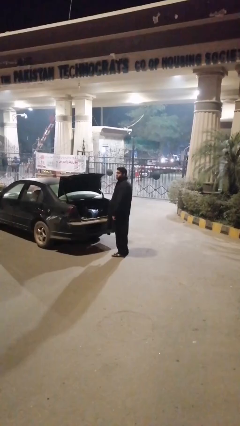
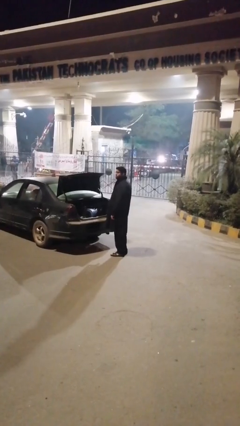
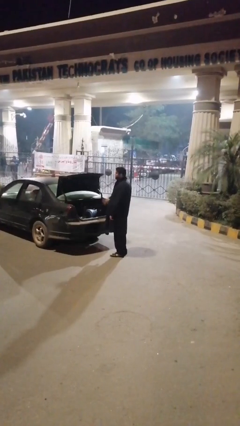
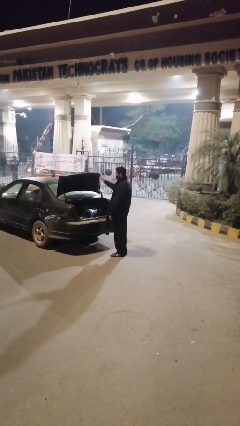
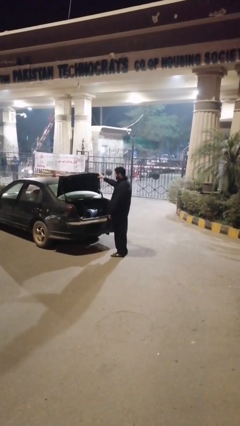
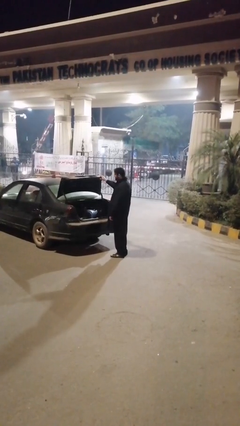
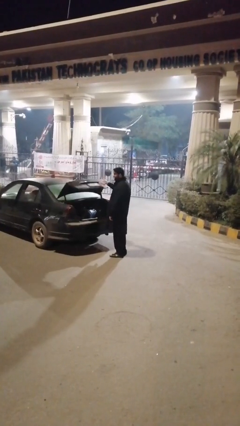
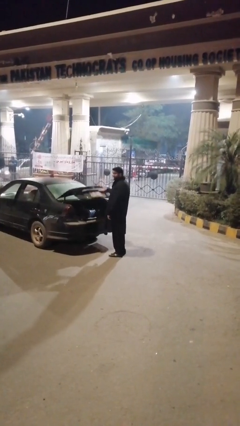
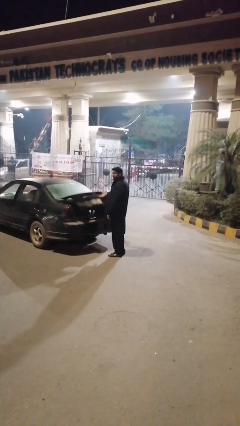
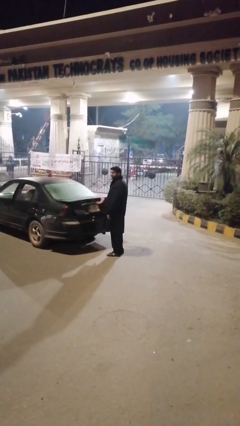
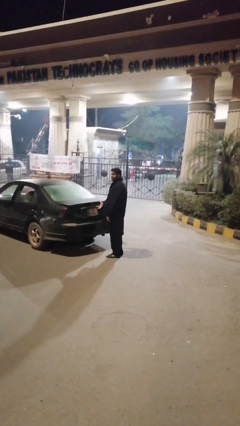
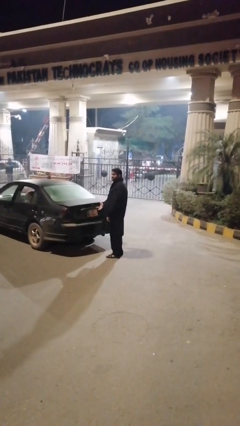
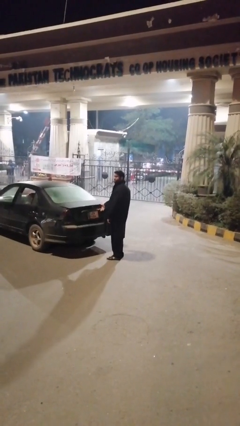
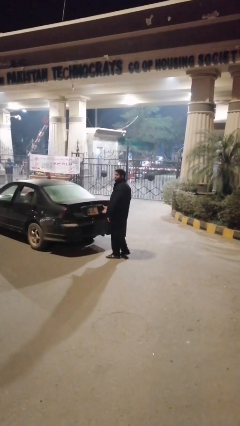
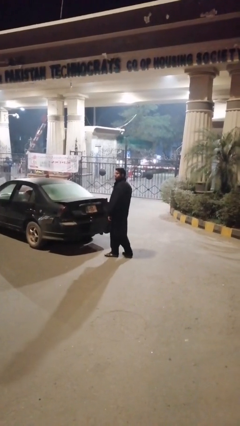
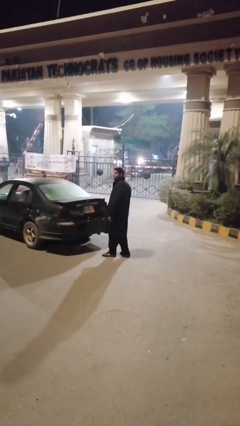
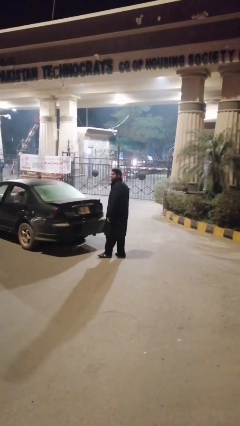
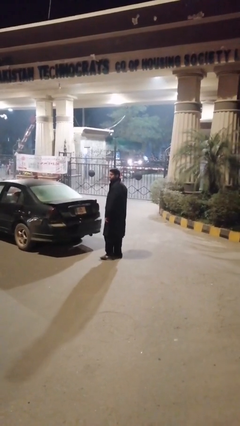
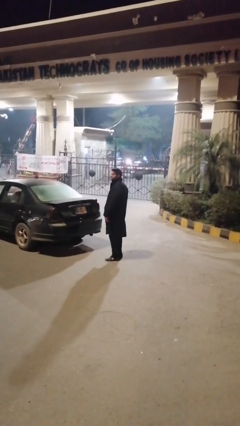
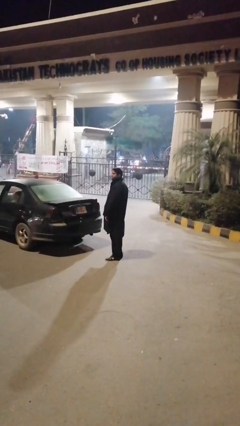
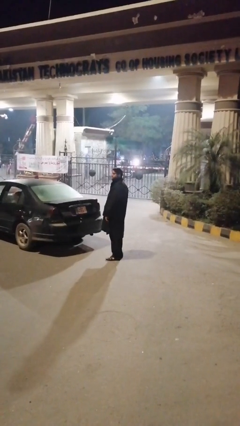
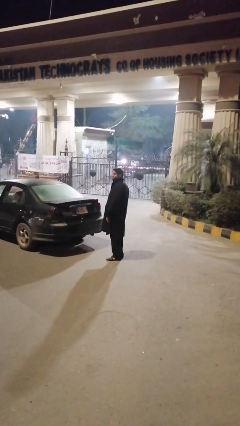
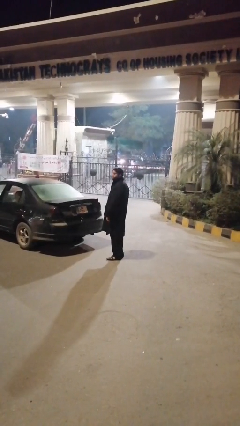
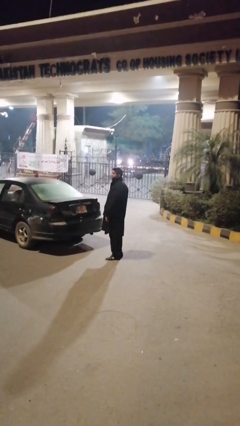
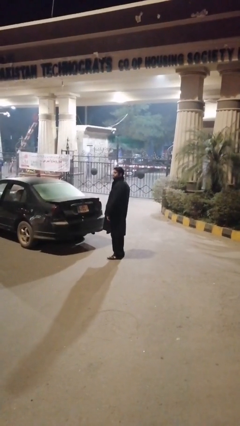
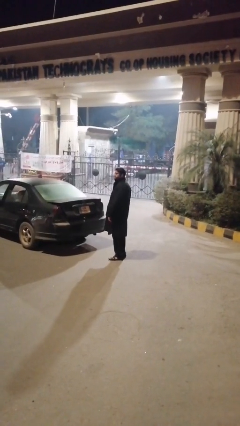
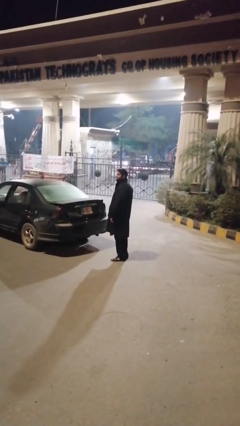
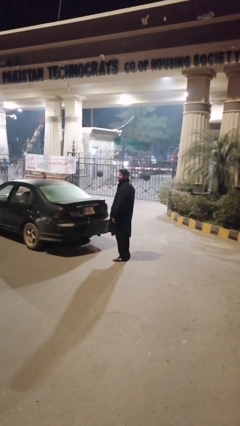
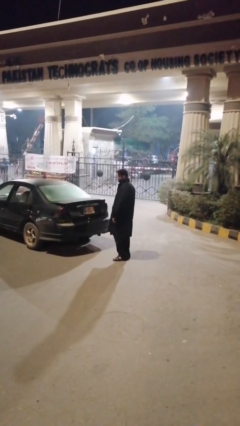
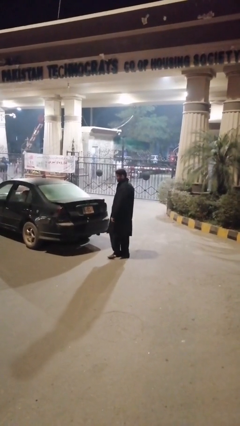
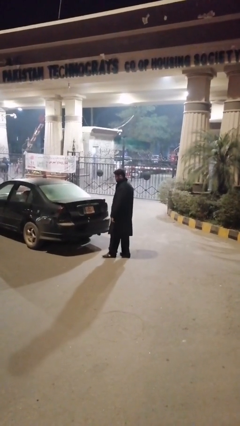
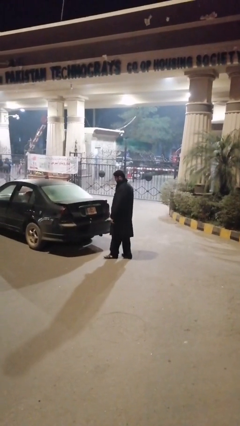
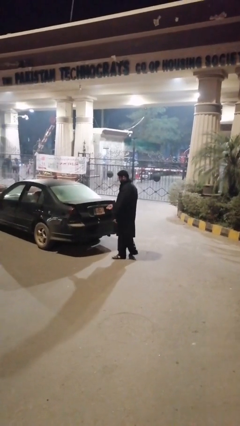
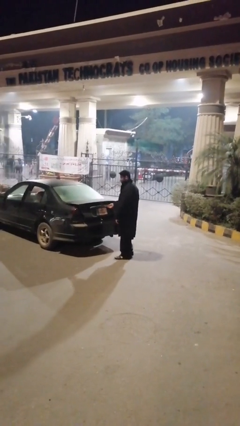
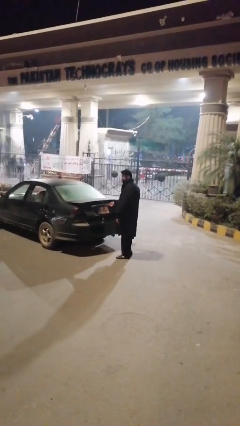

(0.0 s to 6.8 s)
person closes car trunk

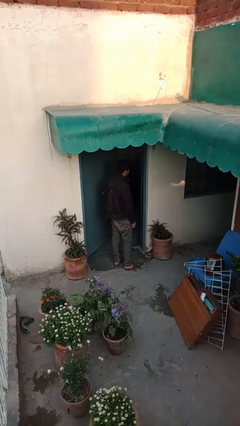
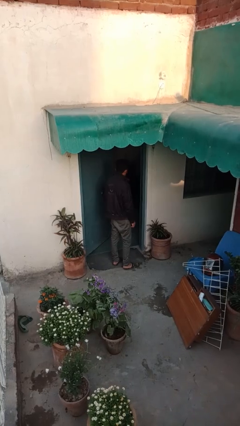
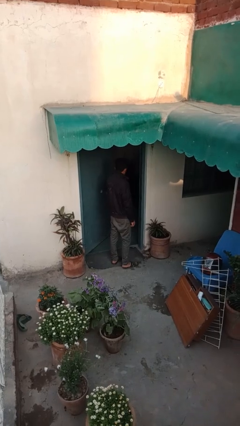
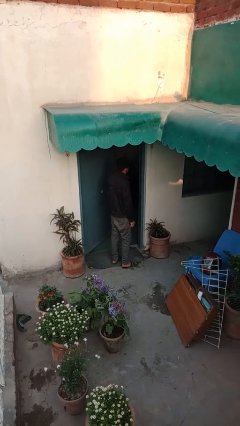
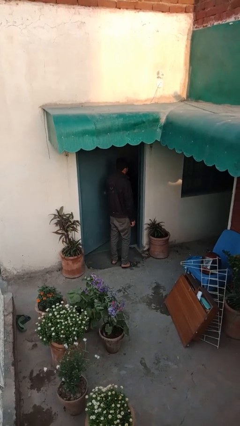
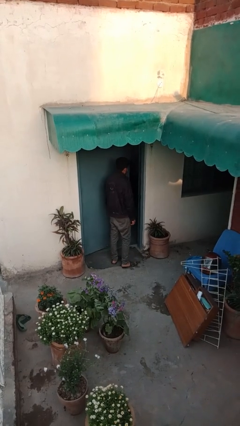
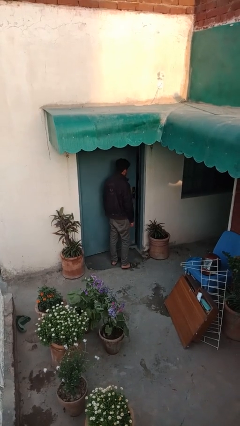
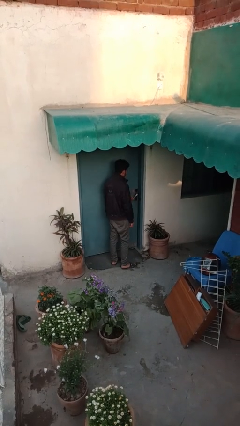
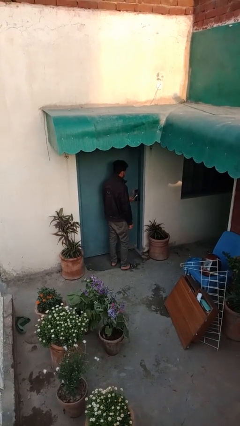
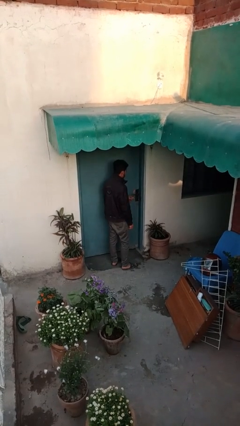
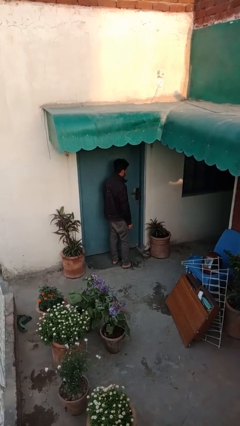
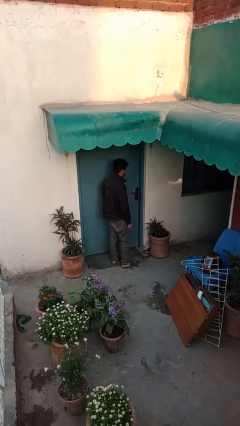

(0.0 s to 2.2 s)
person closes facility door

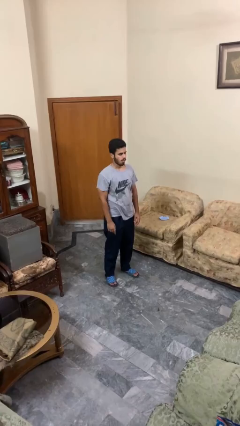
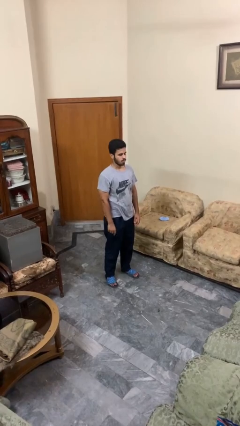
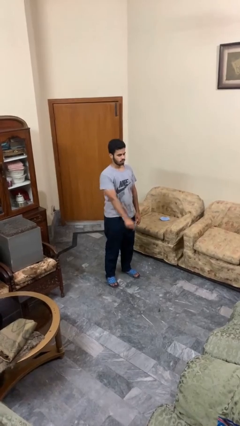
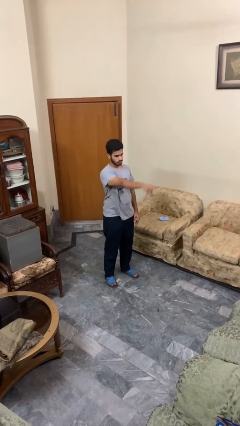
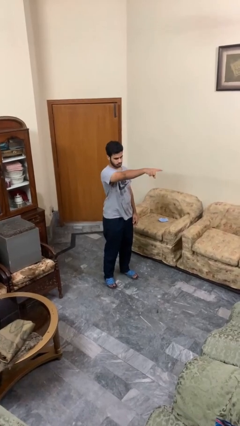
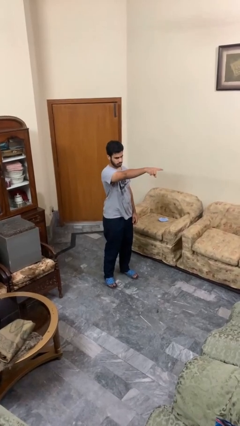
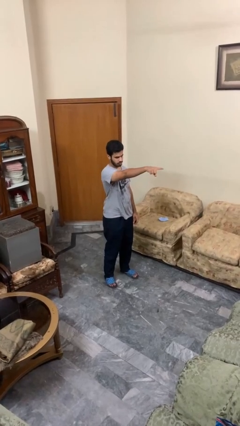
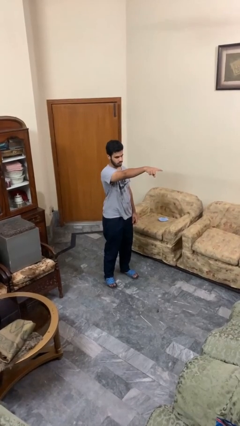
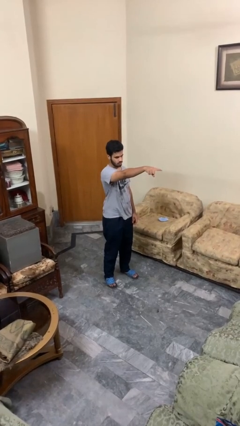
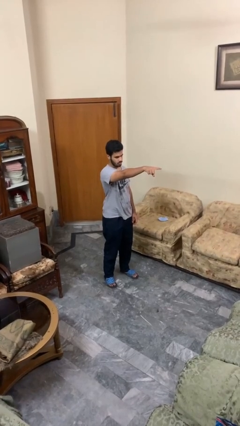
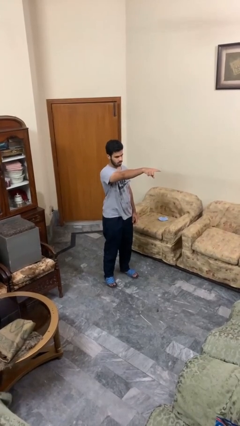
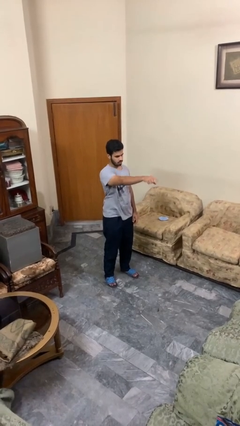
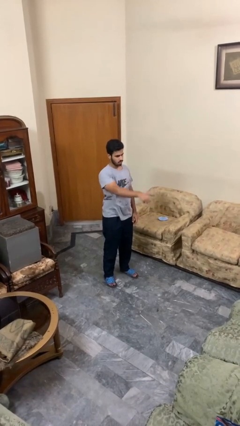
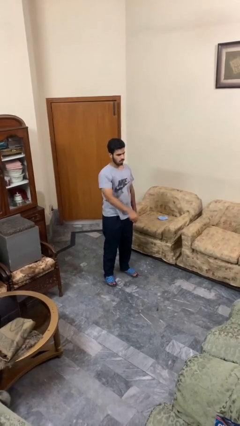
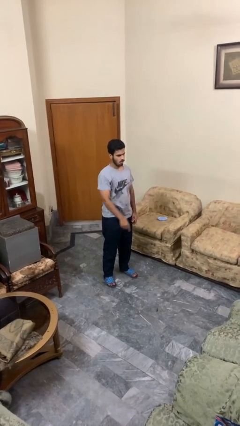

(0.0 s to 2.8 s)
person points at person

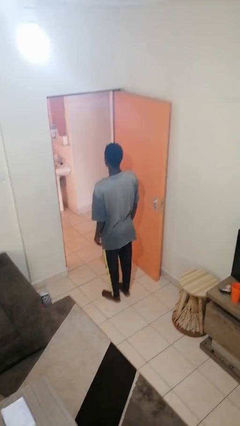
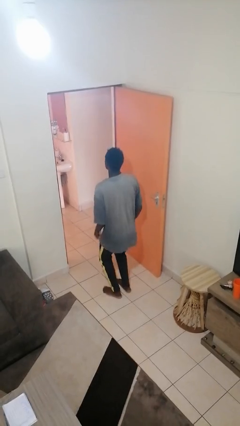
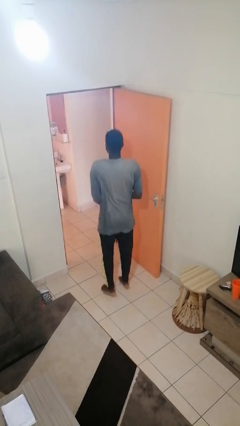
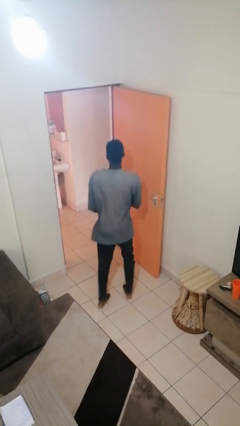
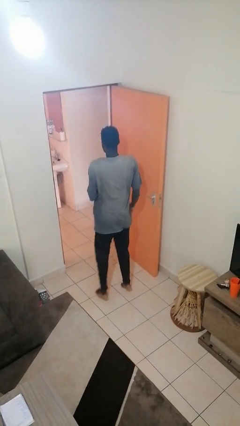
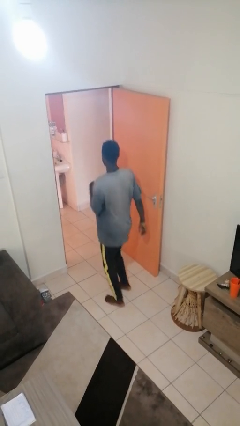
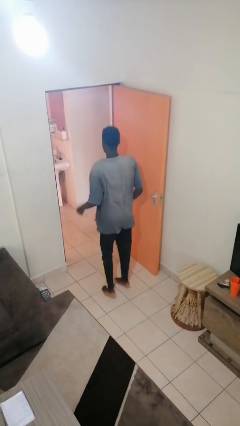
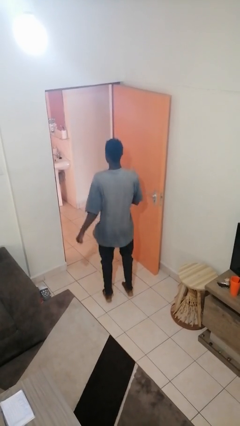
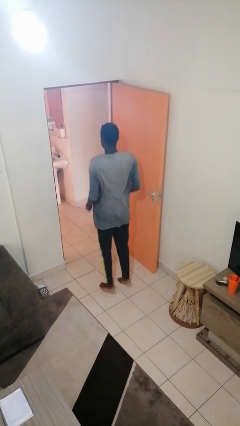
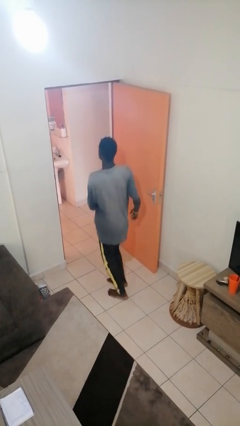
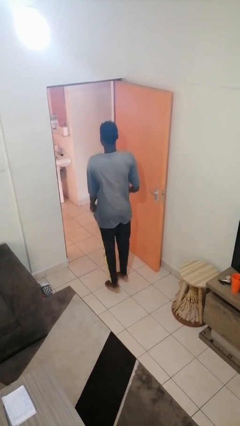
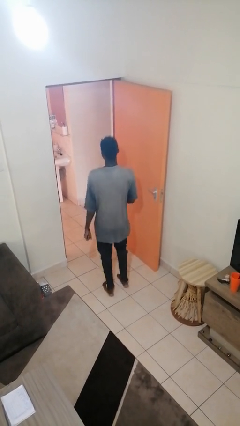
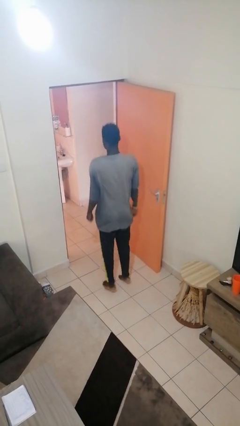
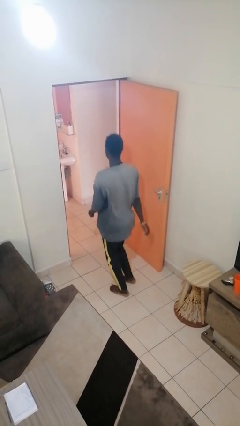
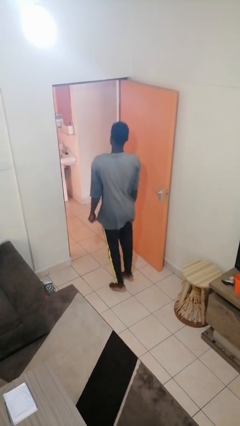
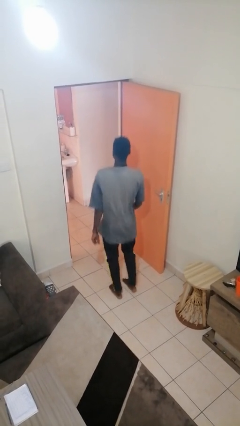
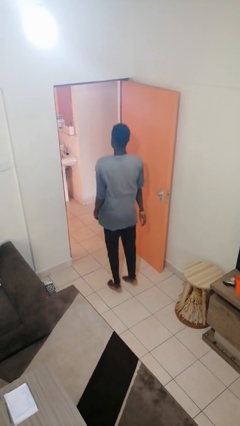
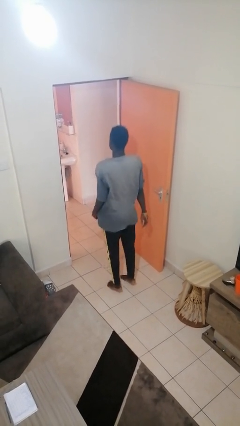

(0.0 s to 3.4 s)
person jumps

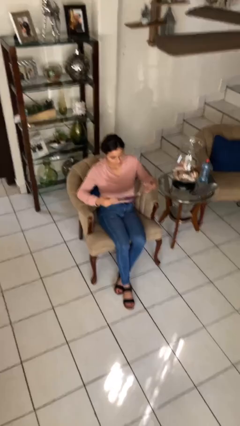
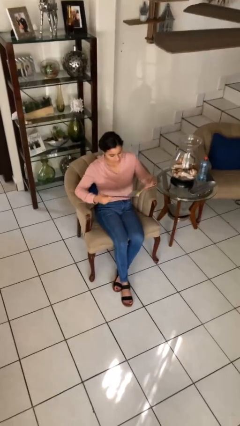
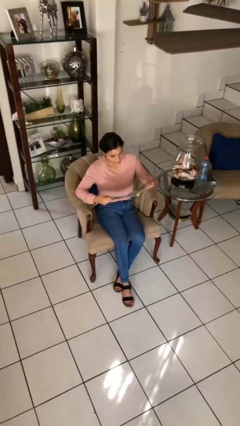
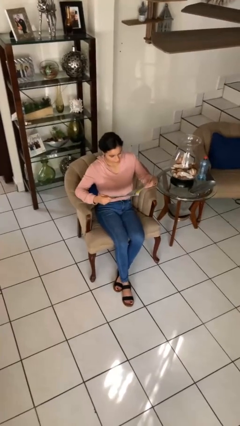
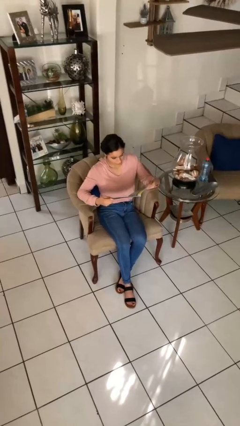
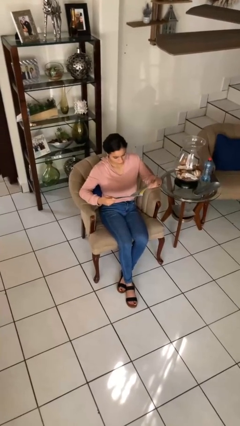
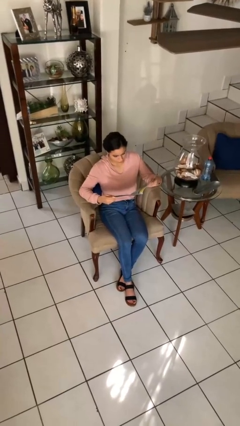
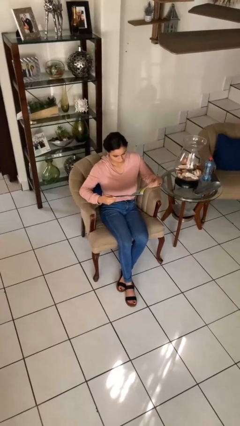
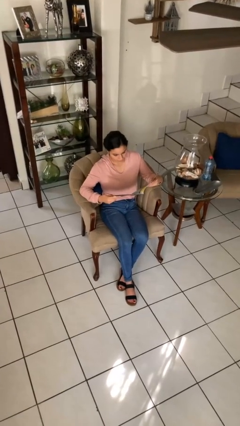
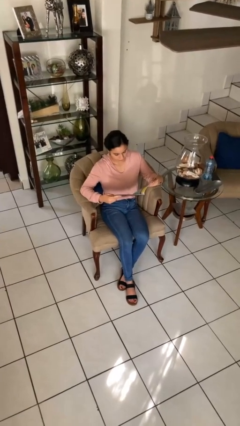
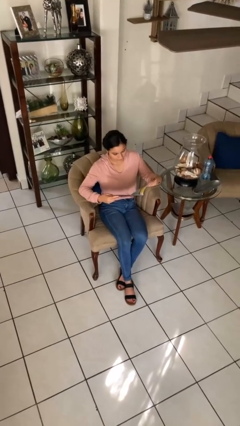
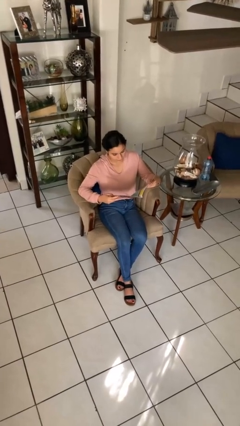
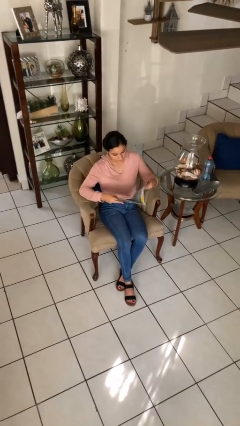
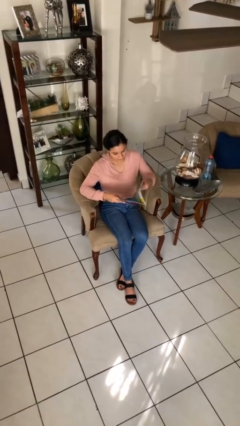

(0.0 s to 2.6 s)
person reads magazine
